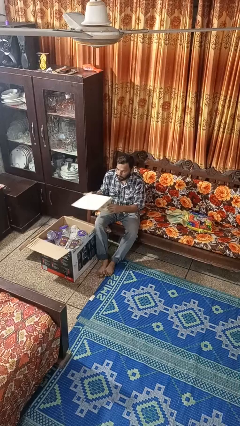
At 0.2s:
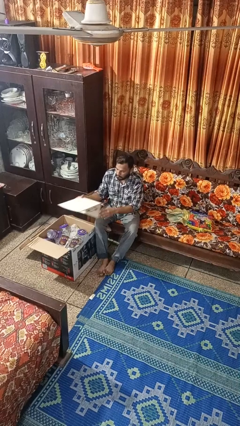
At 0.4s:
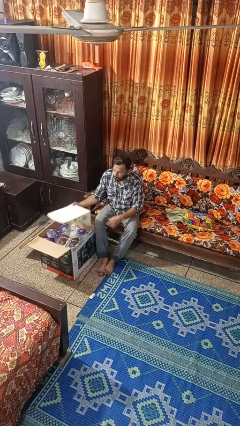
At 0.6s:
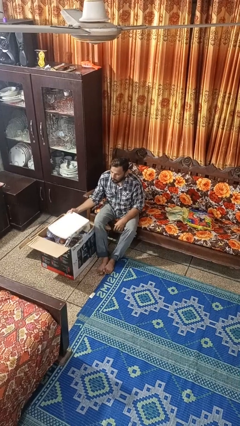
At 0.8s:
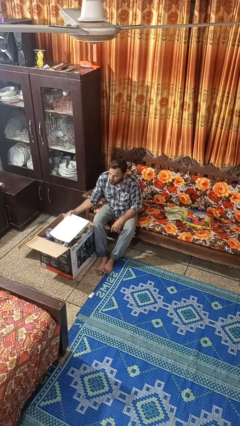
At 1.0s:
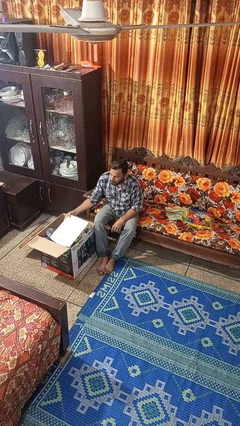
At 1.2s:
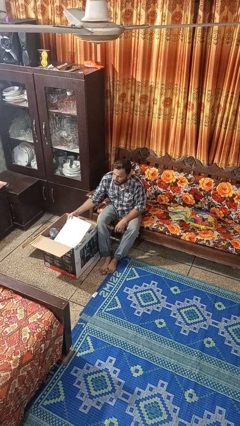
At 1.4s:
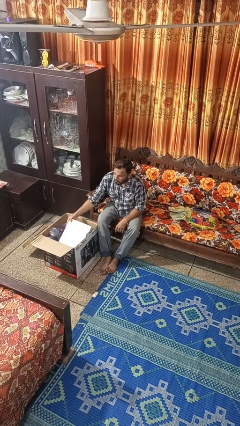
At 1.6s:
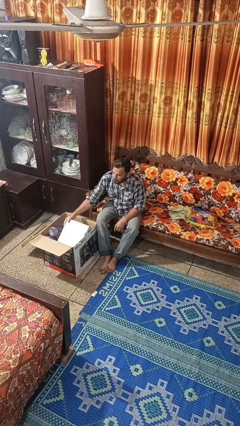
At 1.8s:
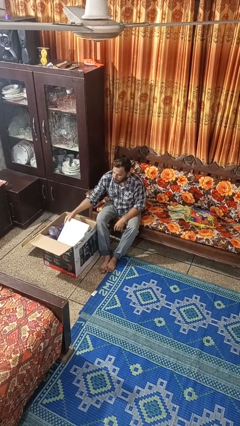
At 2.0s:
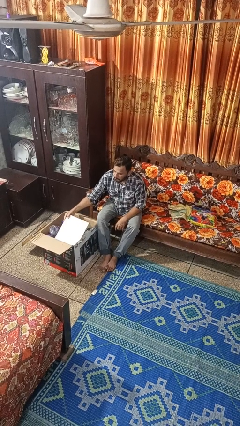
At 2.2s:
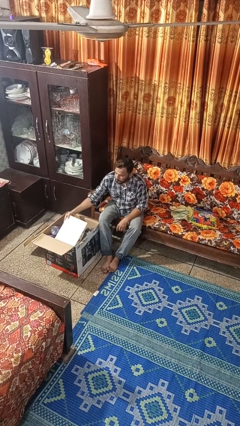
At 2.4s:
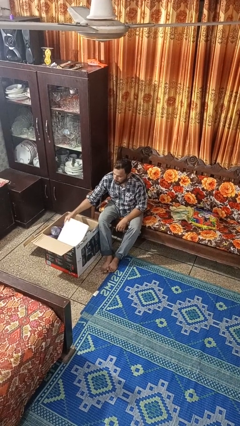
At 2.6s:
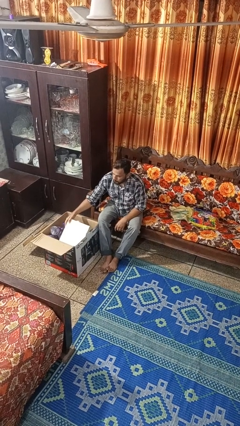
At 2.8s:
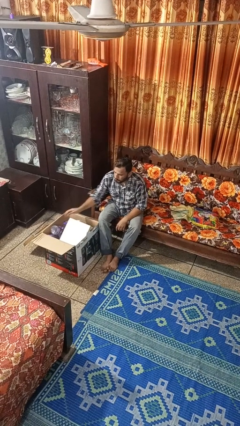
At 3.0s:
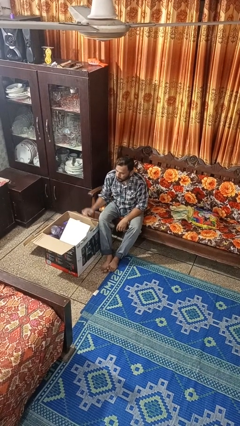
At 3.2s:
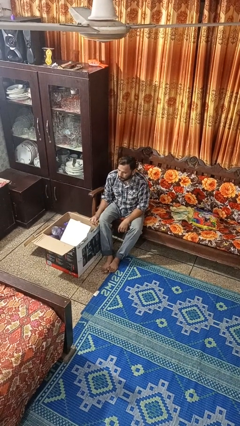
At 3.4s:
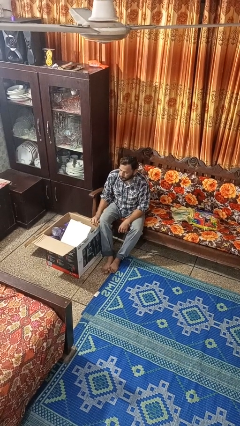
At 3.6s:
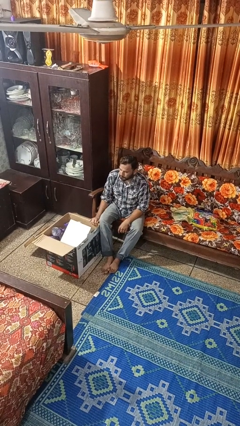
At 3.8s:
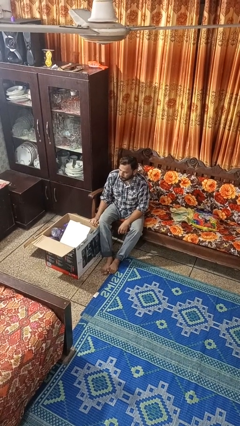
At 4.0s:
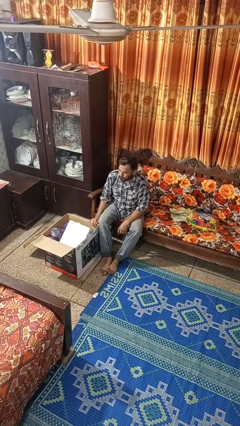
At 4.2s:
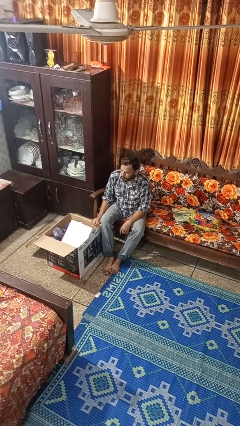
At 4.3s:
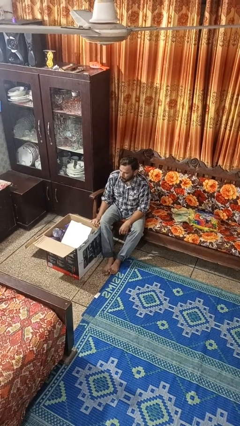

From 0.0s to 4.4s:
person puts object into box

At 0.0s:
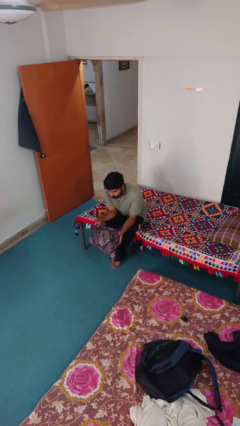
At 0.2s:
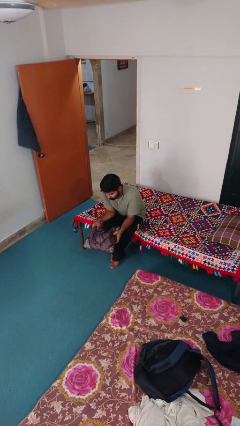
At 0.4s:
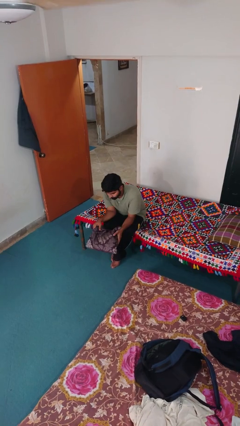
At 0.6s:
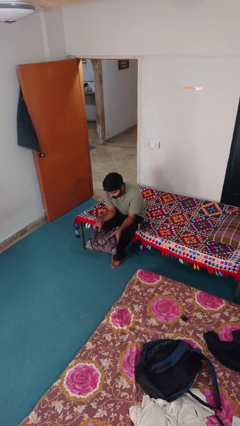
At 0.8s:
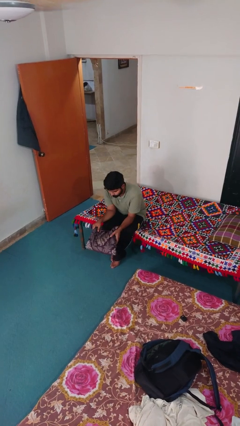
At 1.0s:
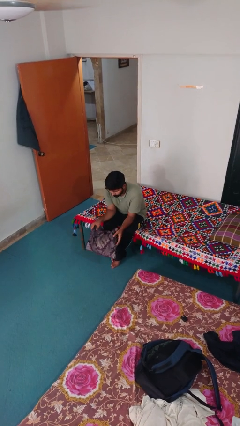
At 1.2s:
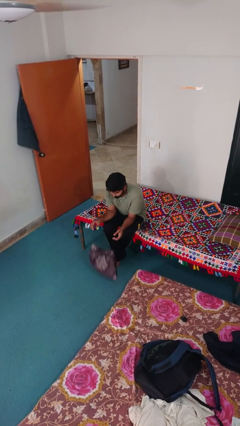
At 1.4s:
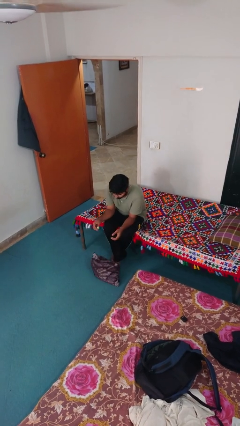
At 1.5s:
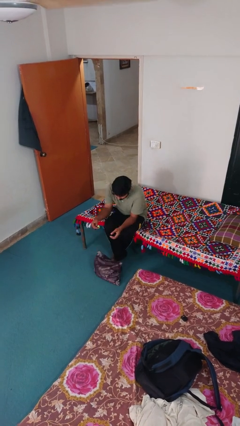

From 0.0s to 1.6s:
person drops object

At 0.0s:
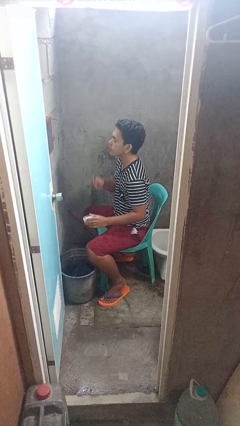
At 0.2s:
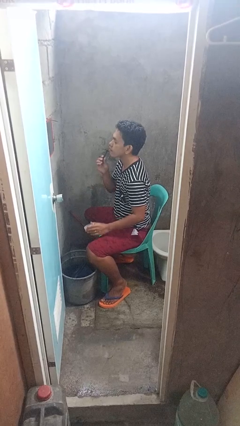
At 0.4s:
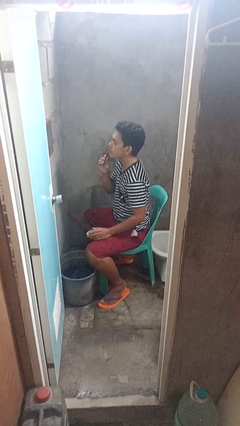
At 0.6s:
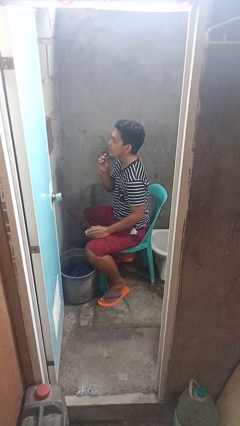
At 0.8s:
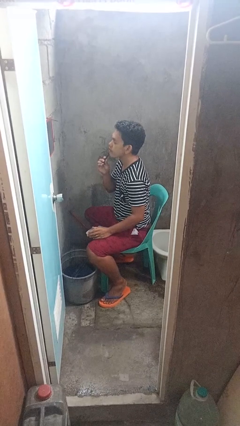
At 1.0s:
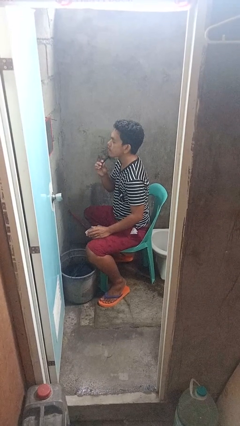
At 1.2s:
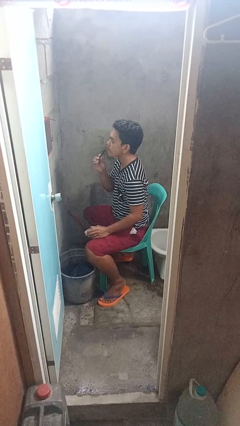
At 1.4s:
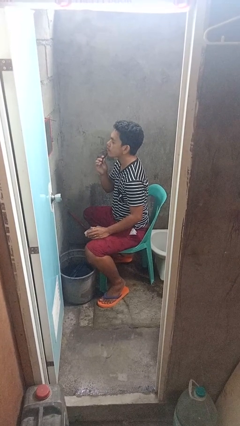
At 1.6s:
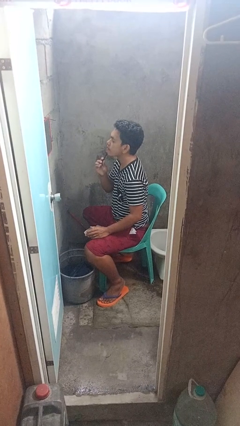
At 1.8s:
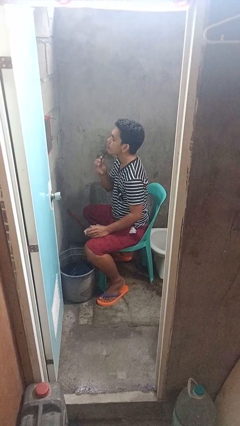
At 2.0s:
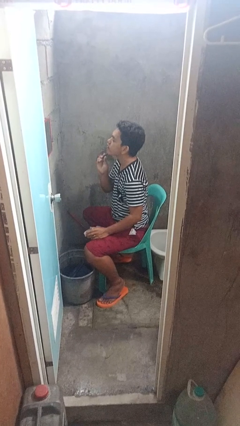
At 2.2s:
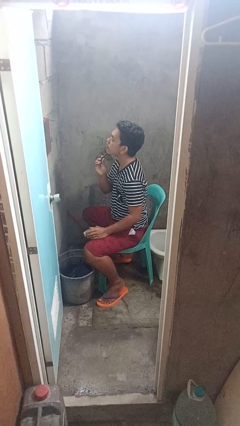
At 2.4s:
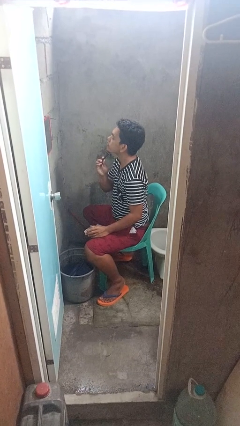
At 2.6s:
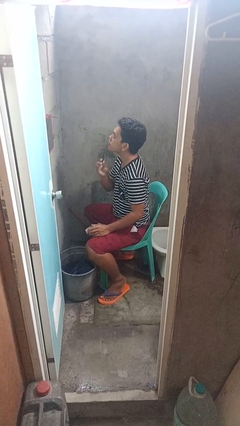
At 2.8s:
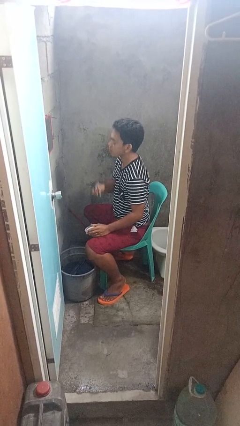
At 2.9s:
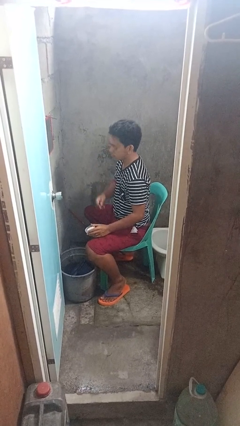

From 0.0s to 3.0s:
person shaves face

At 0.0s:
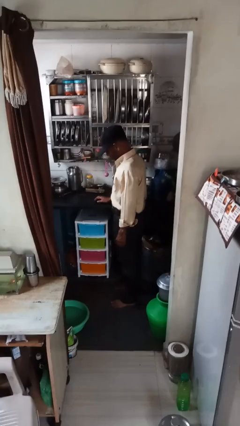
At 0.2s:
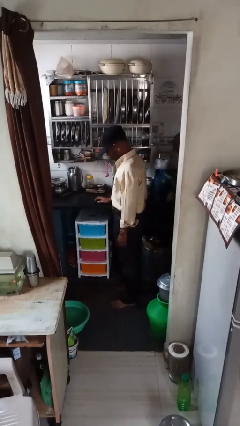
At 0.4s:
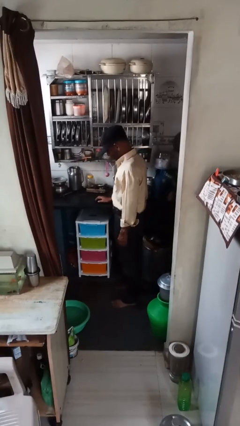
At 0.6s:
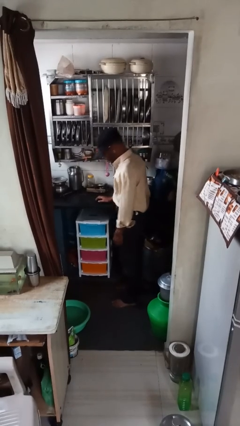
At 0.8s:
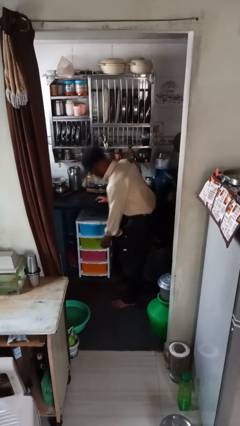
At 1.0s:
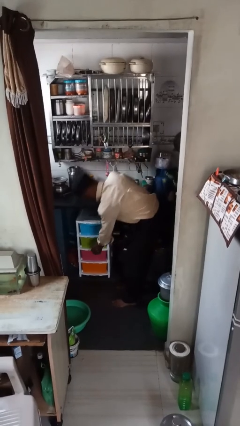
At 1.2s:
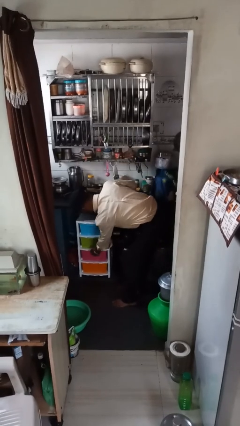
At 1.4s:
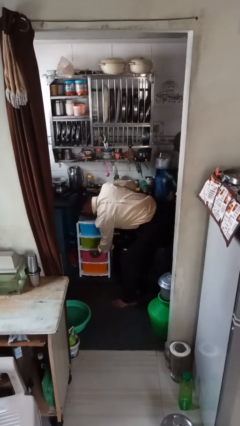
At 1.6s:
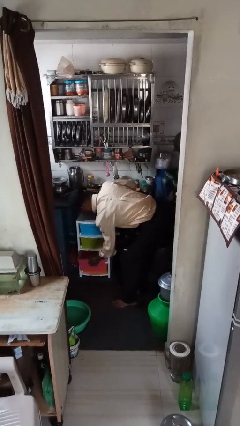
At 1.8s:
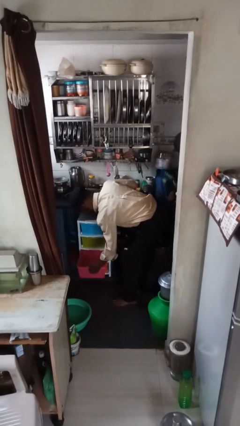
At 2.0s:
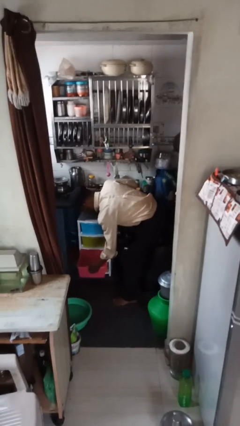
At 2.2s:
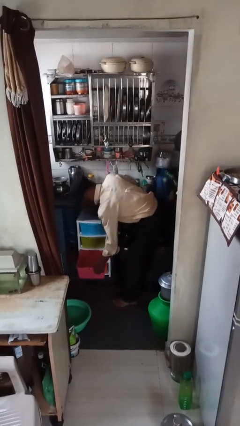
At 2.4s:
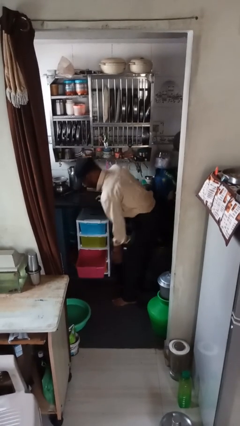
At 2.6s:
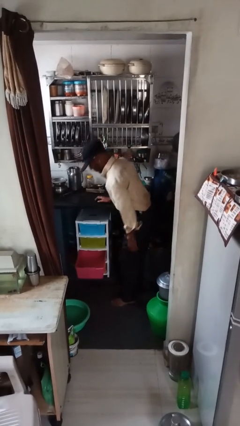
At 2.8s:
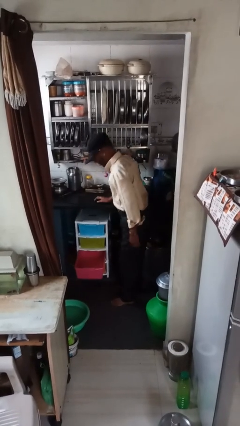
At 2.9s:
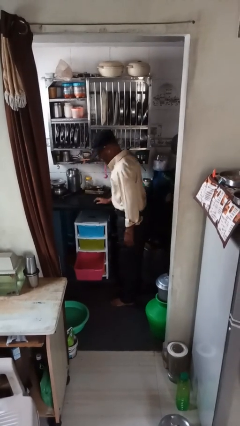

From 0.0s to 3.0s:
person opens kitchen drawer

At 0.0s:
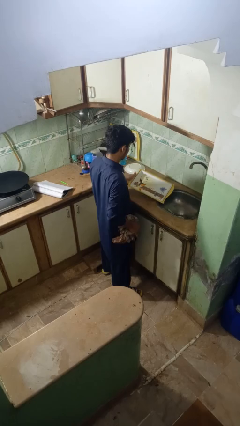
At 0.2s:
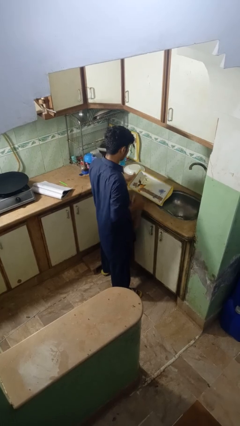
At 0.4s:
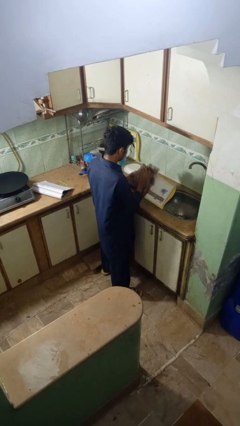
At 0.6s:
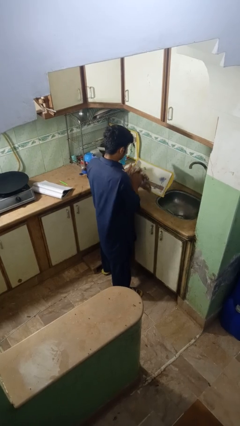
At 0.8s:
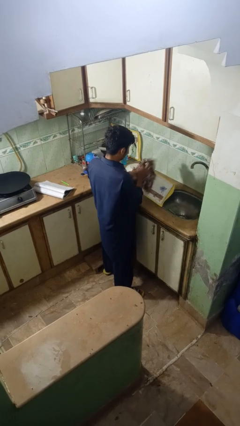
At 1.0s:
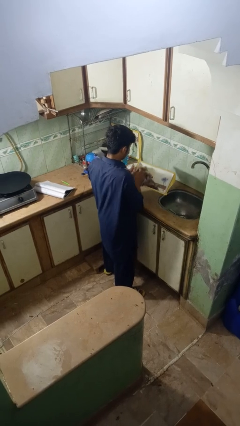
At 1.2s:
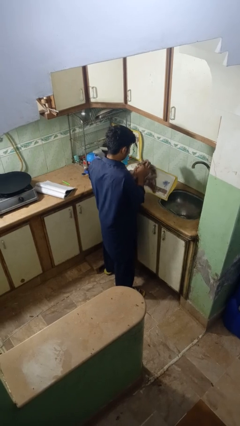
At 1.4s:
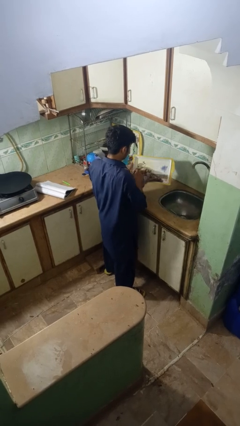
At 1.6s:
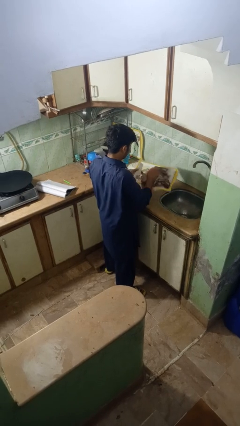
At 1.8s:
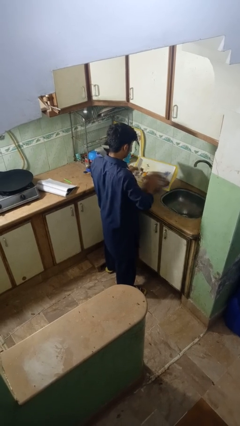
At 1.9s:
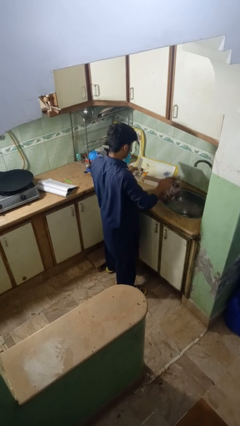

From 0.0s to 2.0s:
person dries dish

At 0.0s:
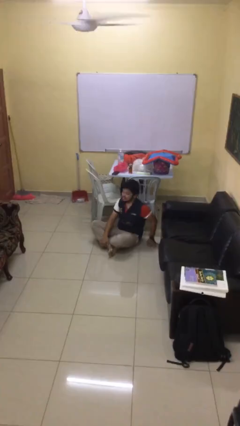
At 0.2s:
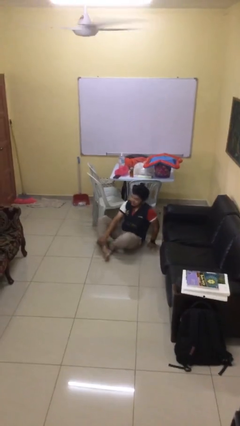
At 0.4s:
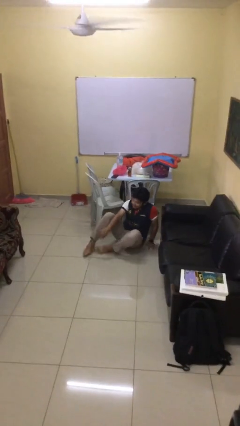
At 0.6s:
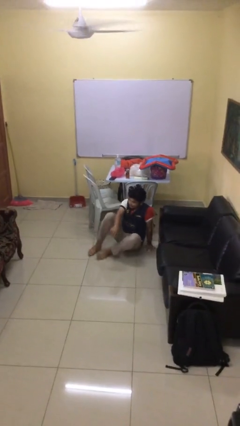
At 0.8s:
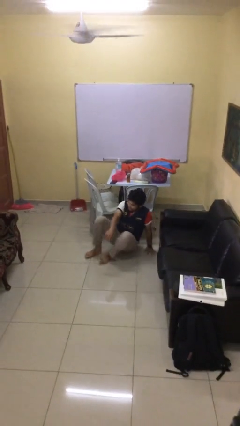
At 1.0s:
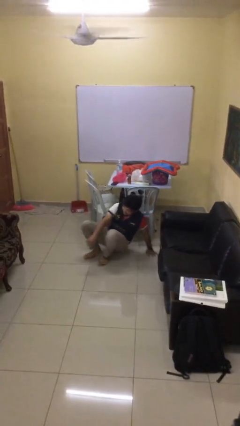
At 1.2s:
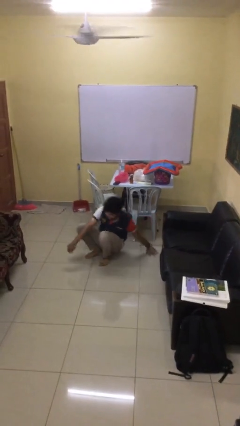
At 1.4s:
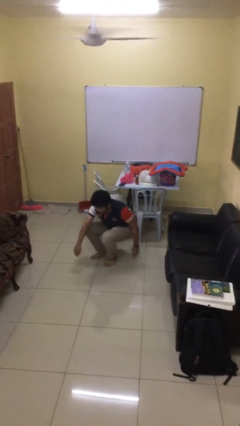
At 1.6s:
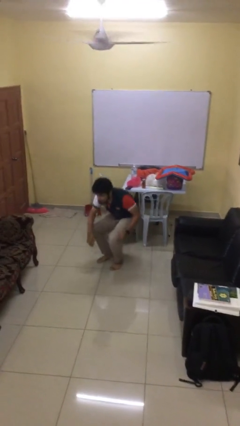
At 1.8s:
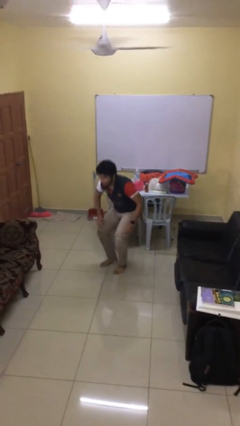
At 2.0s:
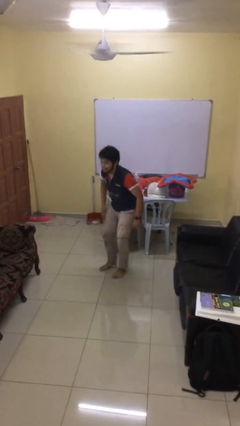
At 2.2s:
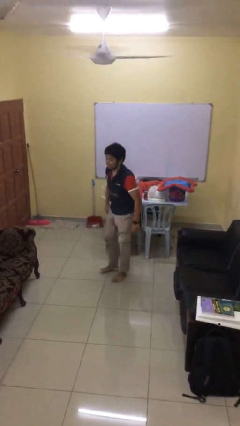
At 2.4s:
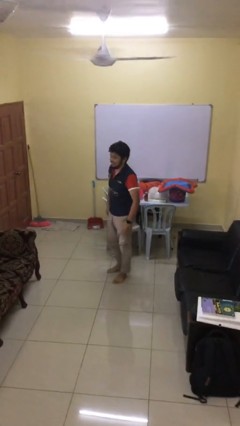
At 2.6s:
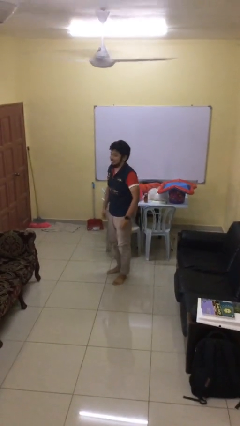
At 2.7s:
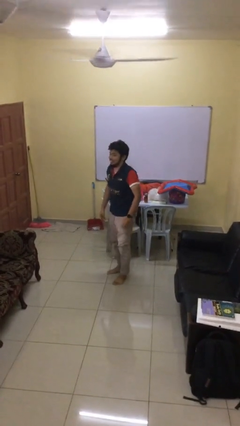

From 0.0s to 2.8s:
person stands up from floor

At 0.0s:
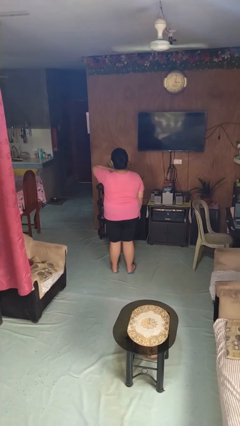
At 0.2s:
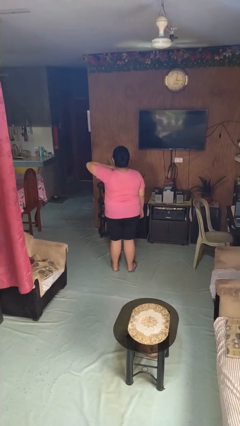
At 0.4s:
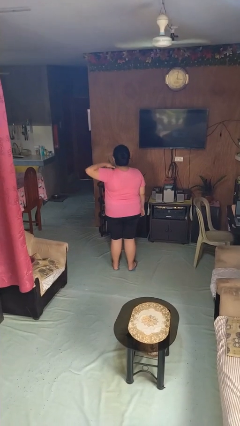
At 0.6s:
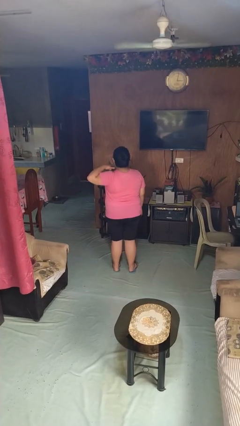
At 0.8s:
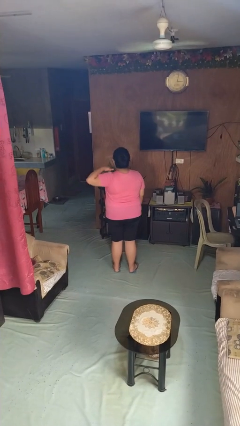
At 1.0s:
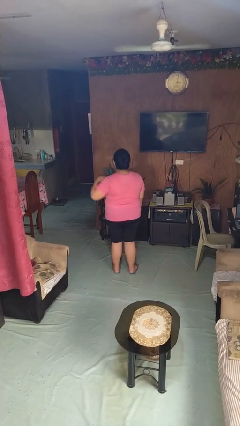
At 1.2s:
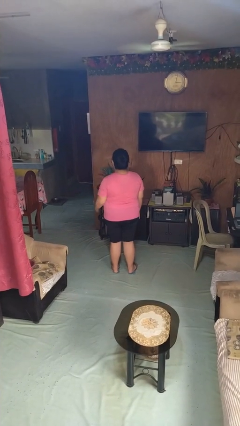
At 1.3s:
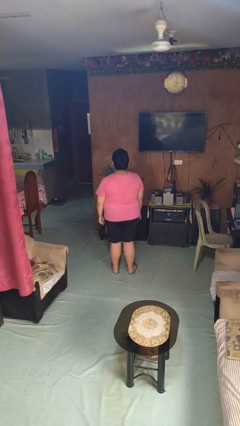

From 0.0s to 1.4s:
person gestures cut
